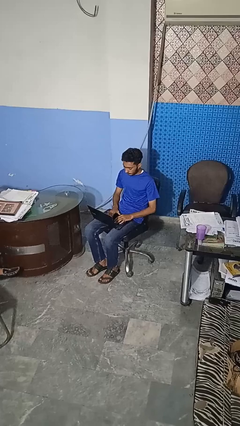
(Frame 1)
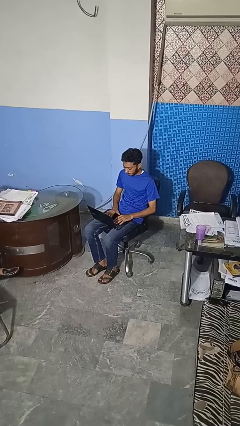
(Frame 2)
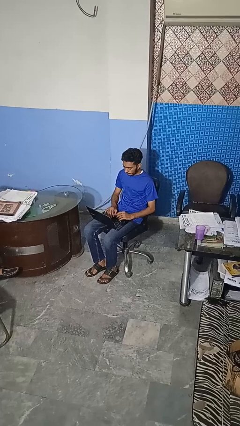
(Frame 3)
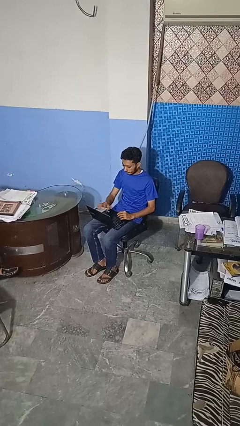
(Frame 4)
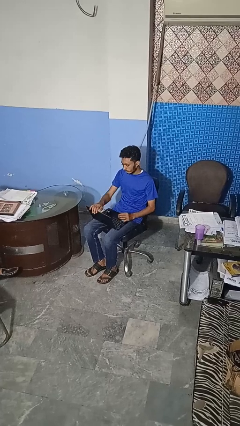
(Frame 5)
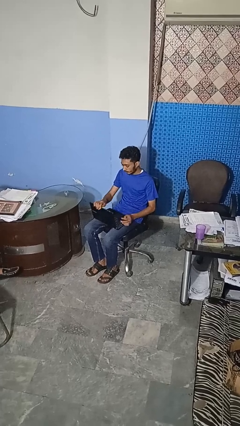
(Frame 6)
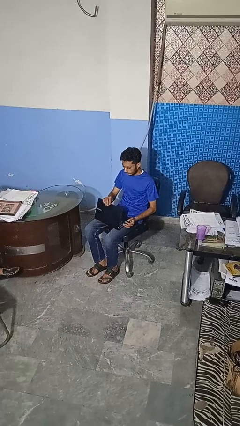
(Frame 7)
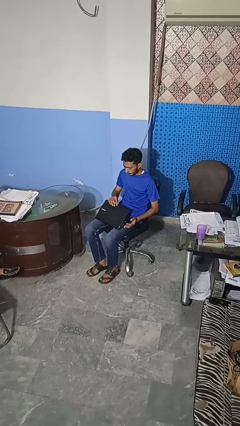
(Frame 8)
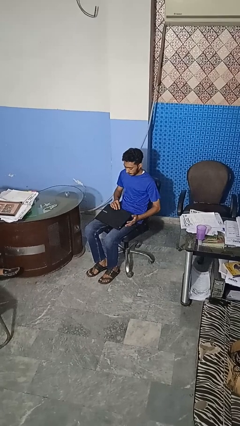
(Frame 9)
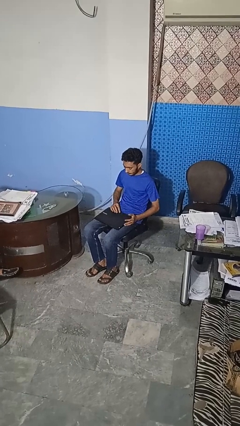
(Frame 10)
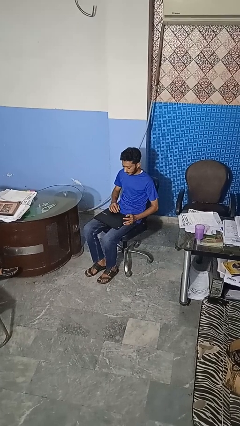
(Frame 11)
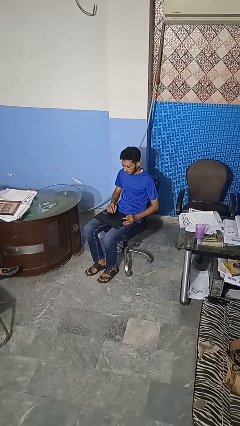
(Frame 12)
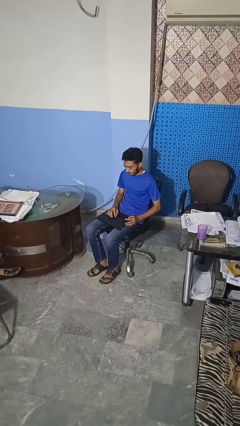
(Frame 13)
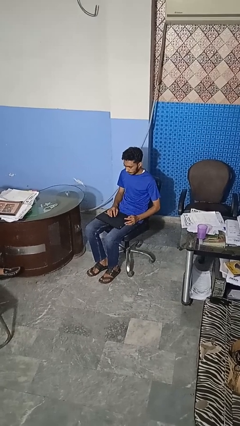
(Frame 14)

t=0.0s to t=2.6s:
person closes laptop

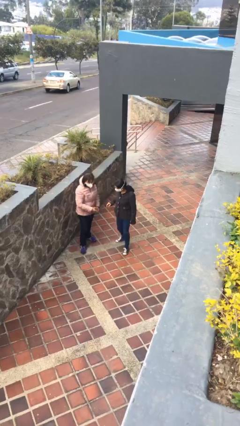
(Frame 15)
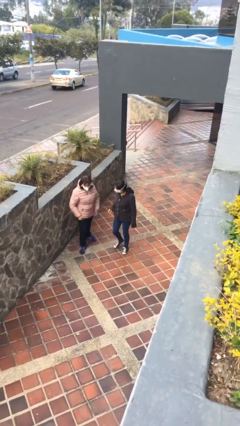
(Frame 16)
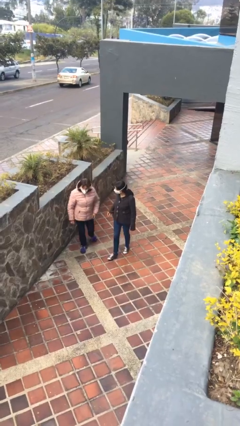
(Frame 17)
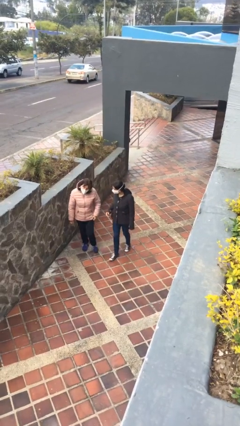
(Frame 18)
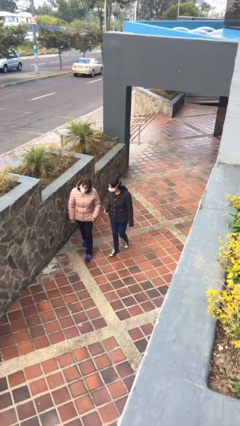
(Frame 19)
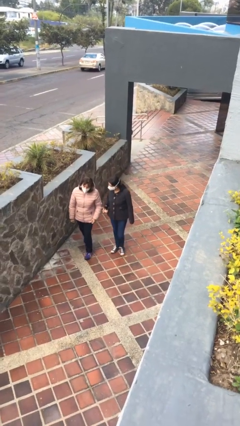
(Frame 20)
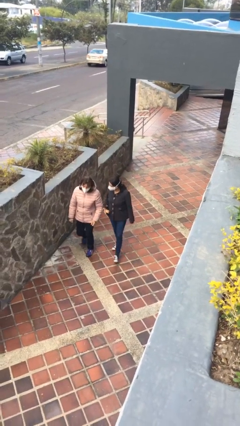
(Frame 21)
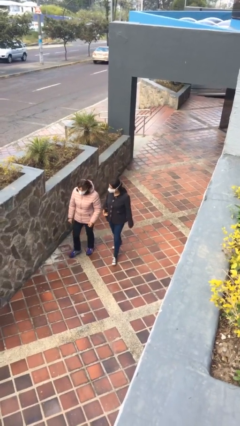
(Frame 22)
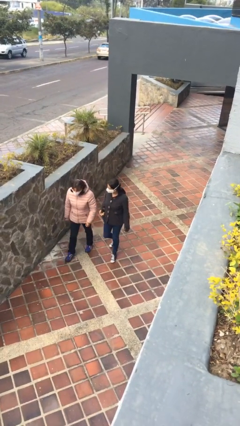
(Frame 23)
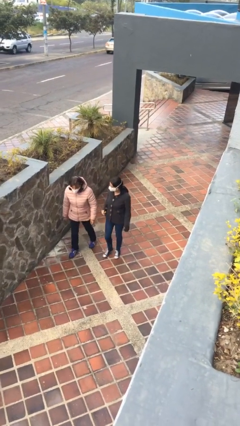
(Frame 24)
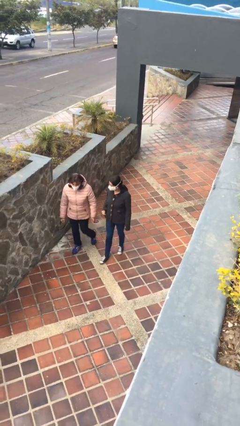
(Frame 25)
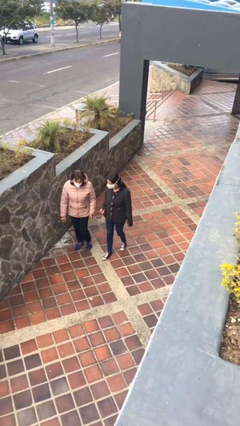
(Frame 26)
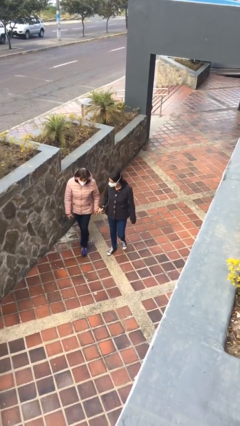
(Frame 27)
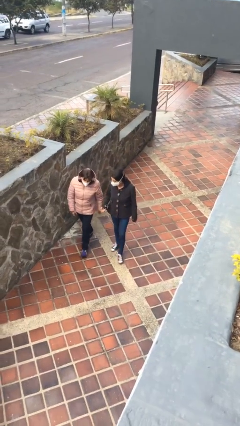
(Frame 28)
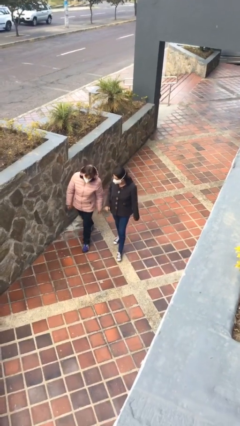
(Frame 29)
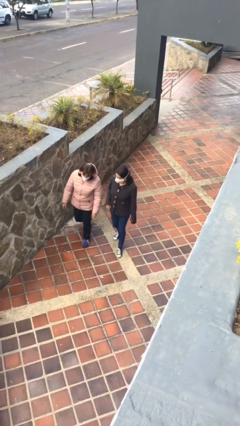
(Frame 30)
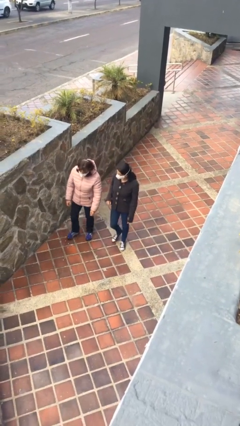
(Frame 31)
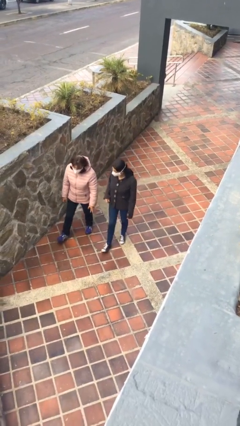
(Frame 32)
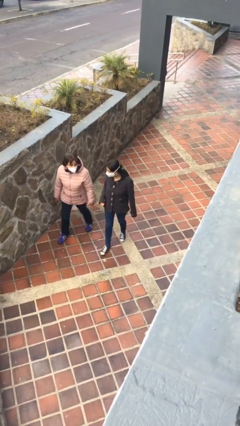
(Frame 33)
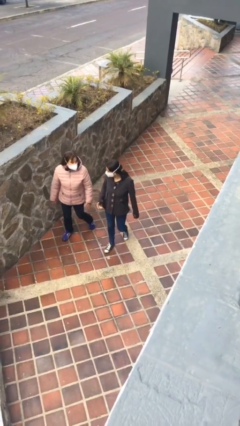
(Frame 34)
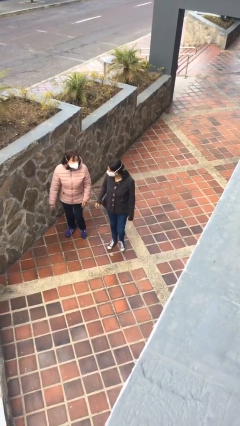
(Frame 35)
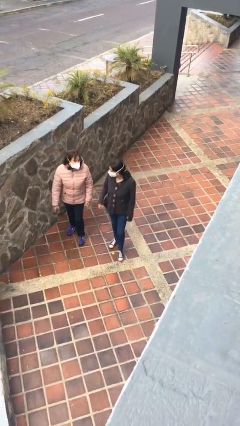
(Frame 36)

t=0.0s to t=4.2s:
person talks to person

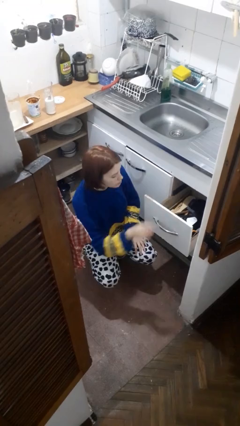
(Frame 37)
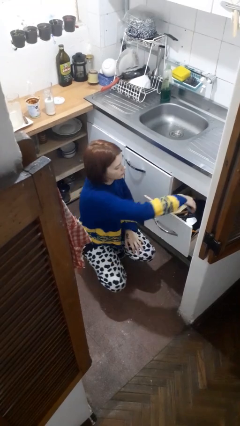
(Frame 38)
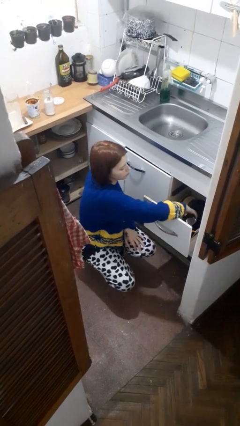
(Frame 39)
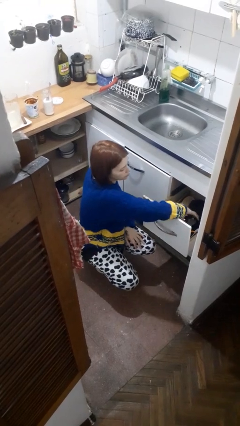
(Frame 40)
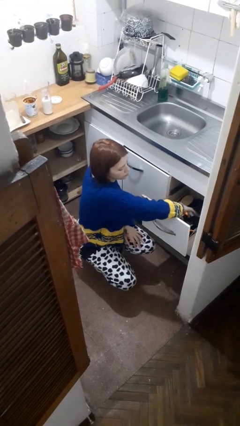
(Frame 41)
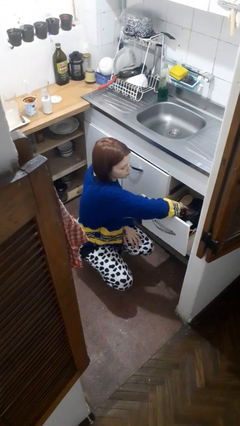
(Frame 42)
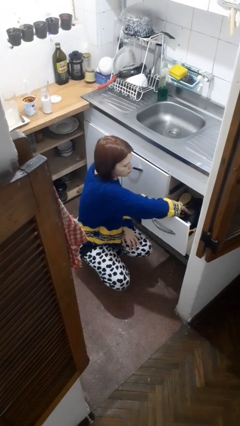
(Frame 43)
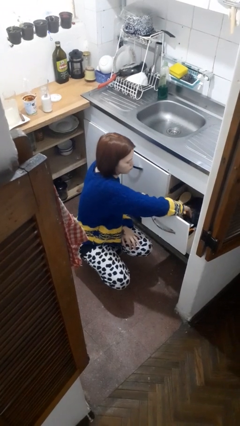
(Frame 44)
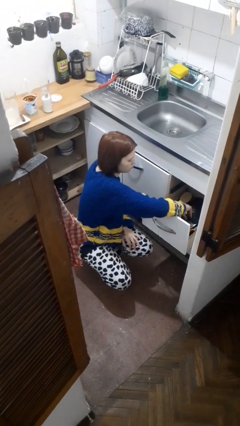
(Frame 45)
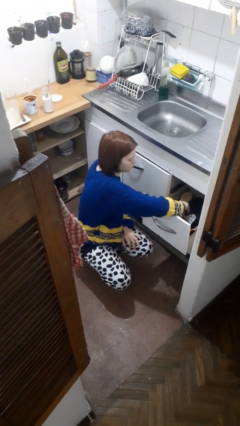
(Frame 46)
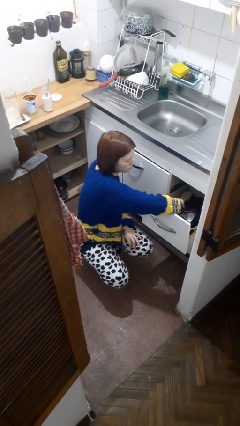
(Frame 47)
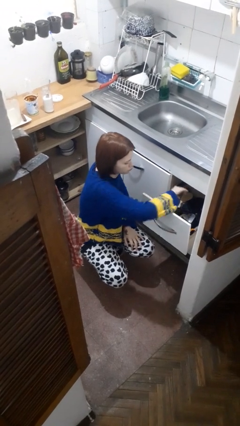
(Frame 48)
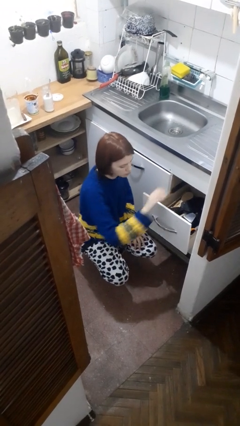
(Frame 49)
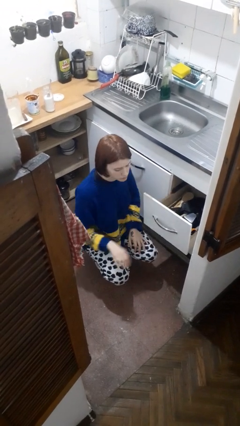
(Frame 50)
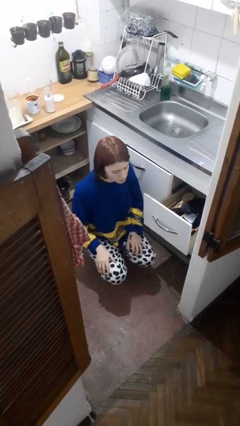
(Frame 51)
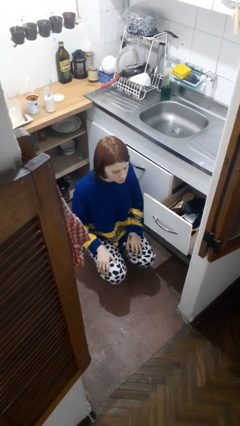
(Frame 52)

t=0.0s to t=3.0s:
person searches in kitchen drawer

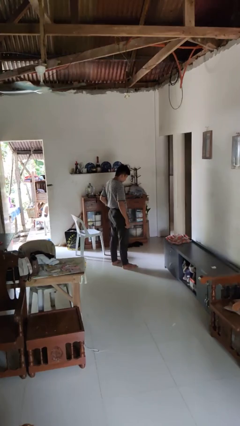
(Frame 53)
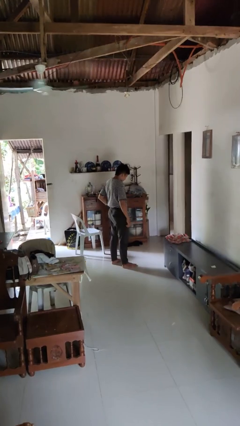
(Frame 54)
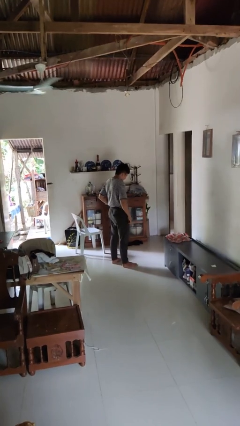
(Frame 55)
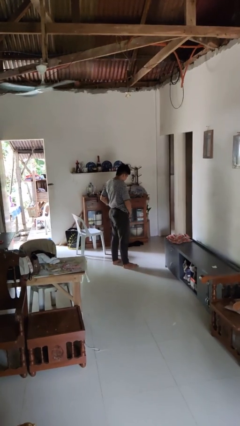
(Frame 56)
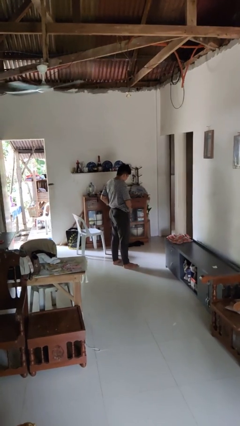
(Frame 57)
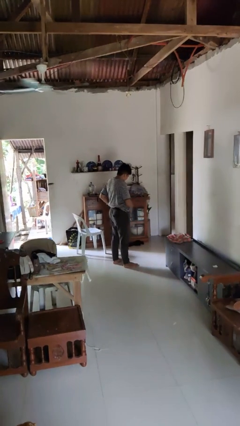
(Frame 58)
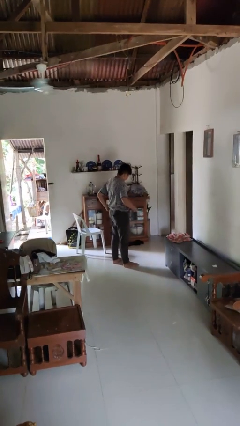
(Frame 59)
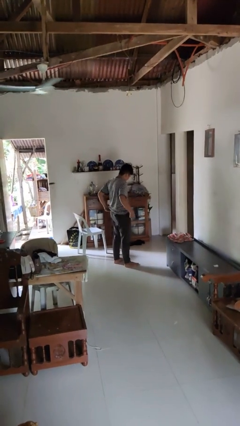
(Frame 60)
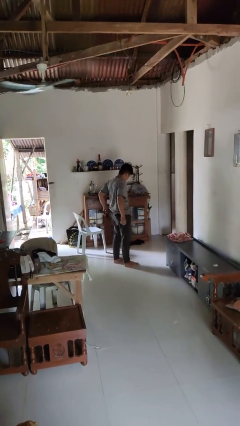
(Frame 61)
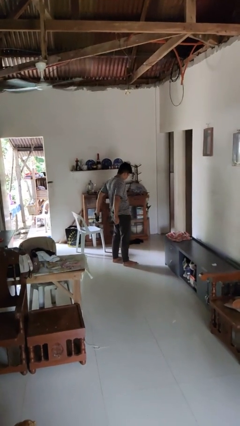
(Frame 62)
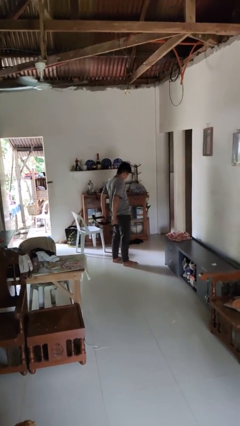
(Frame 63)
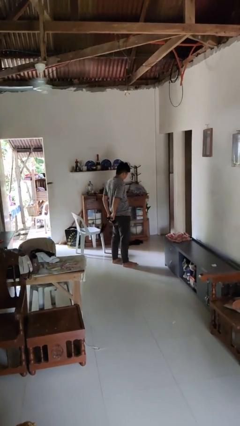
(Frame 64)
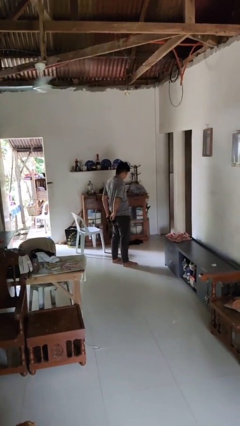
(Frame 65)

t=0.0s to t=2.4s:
person takes off belt

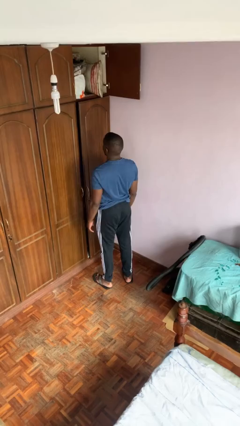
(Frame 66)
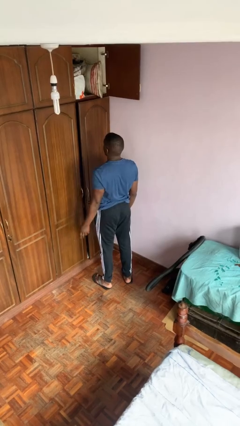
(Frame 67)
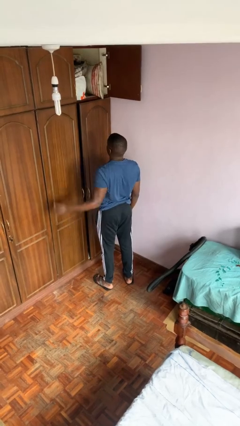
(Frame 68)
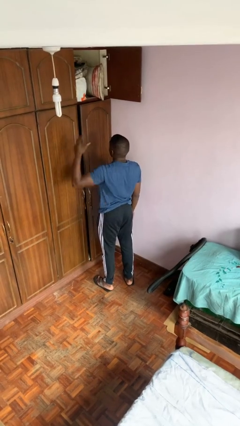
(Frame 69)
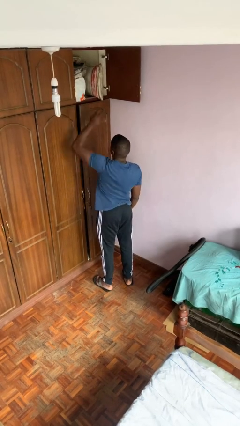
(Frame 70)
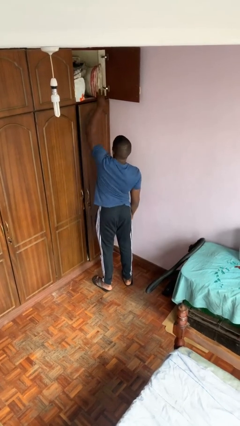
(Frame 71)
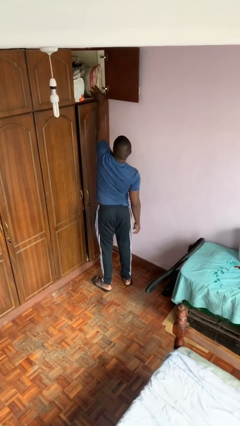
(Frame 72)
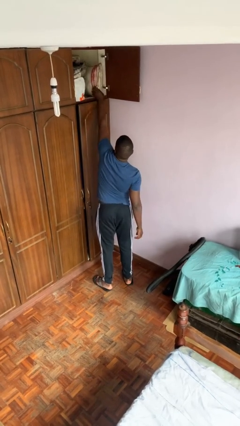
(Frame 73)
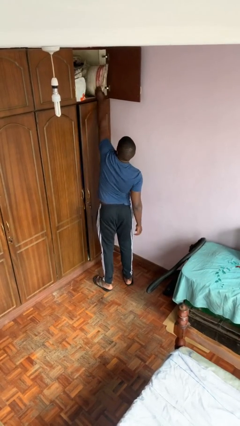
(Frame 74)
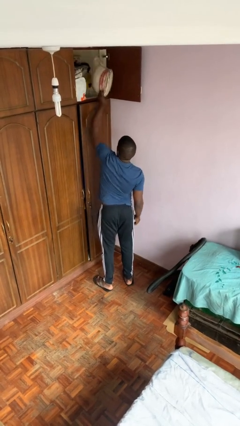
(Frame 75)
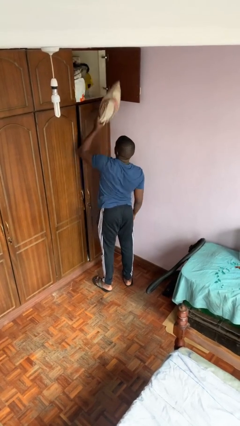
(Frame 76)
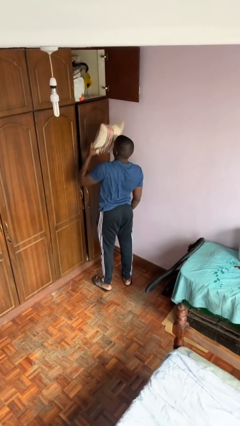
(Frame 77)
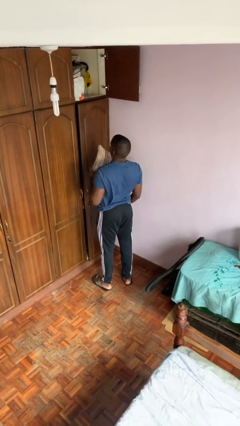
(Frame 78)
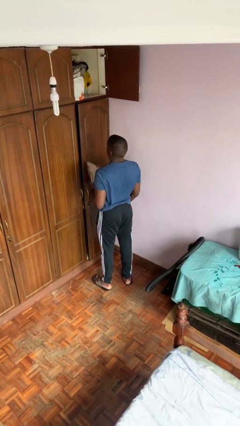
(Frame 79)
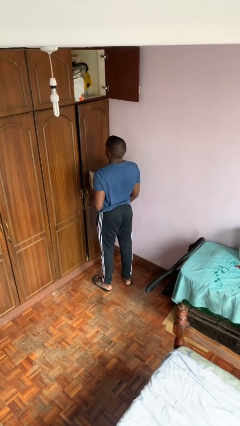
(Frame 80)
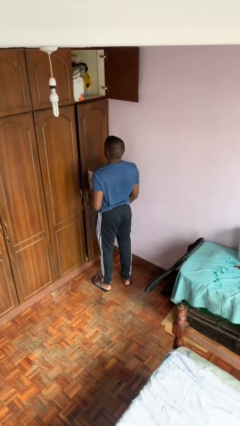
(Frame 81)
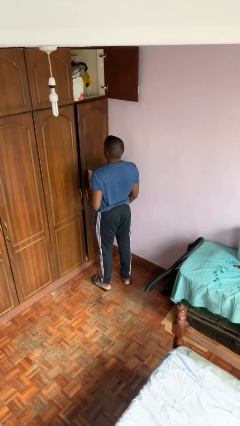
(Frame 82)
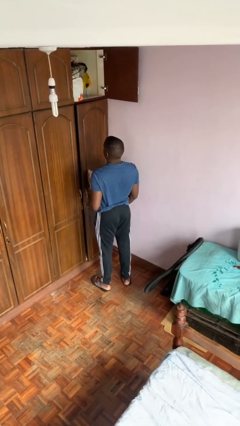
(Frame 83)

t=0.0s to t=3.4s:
person picks up object from shelf

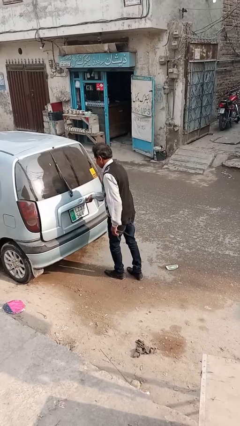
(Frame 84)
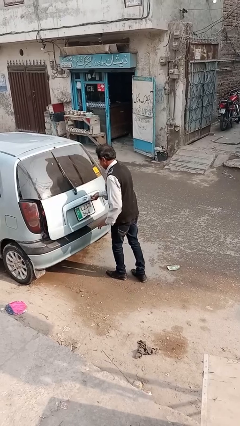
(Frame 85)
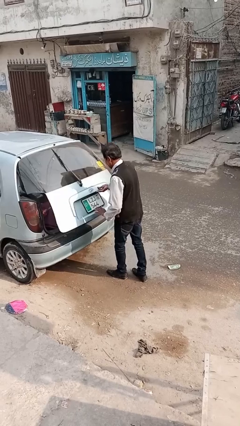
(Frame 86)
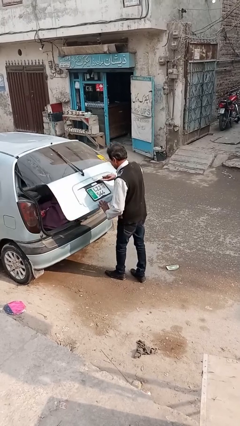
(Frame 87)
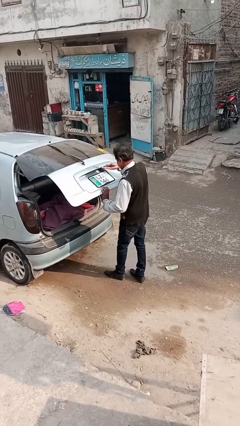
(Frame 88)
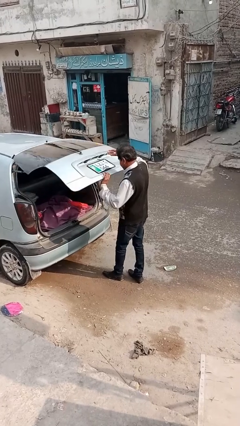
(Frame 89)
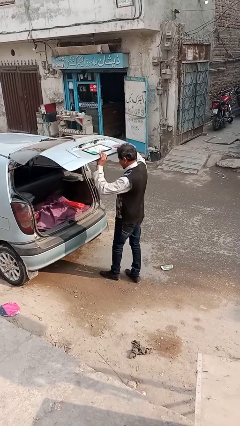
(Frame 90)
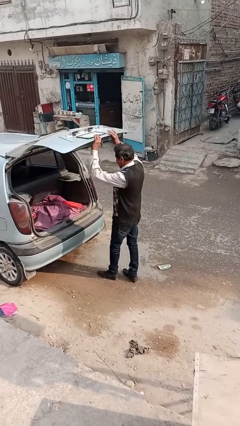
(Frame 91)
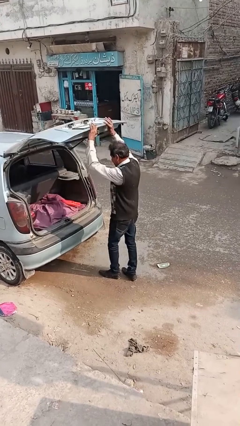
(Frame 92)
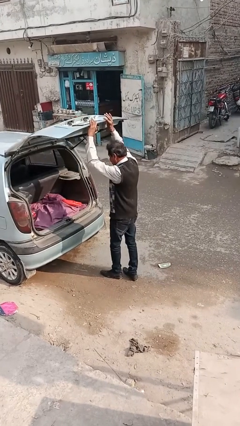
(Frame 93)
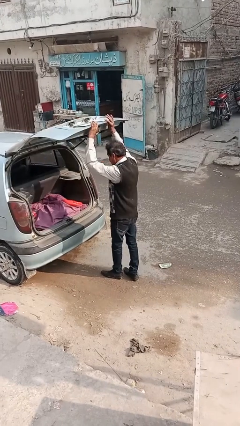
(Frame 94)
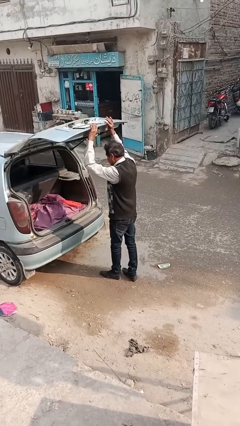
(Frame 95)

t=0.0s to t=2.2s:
person opens car trunk
